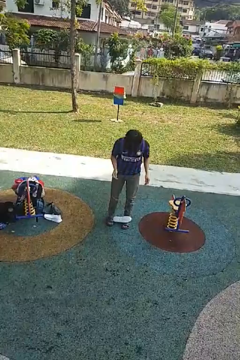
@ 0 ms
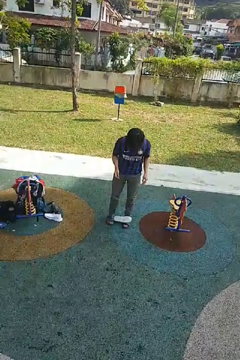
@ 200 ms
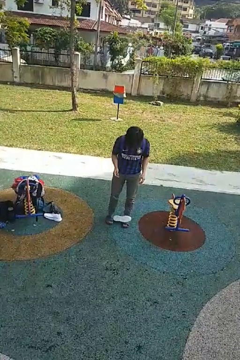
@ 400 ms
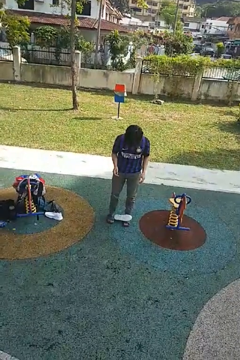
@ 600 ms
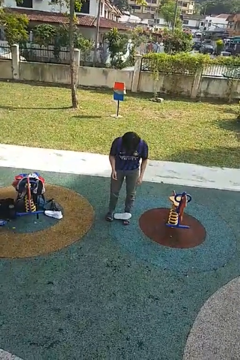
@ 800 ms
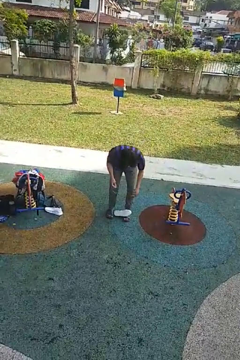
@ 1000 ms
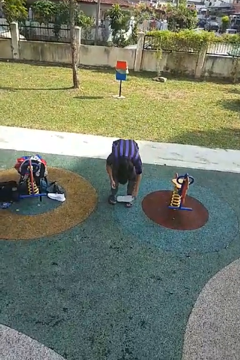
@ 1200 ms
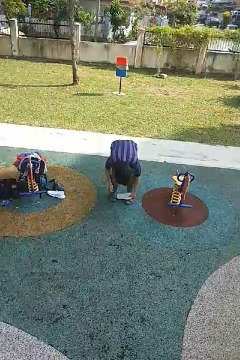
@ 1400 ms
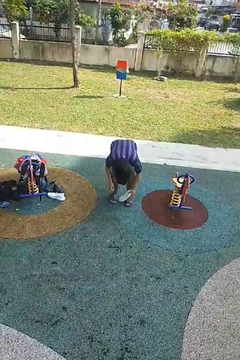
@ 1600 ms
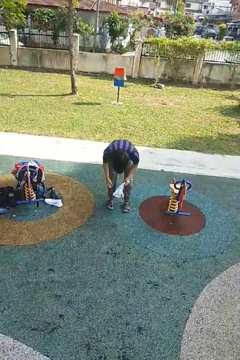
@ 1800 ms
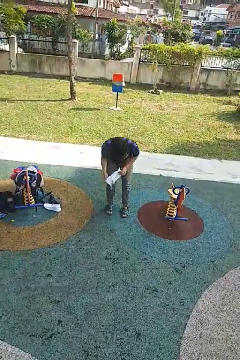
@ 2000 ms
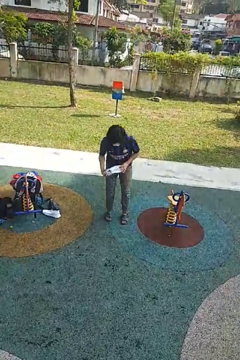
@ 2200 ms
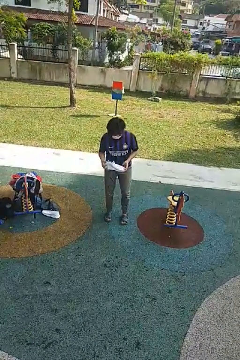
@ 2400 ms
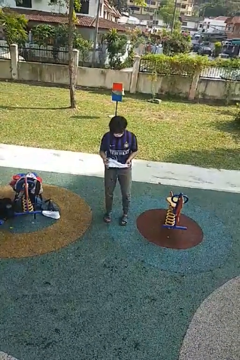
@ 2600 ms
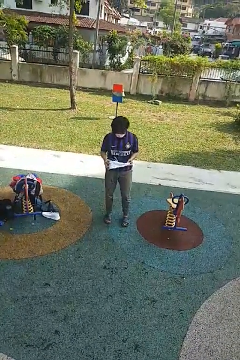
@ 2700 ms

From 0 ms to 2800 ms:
person picks up object from floor

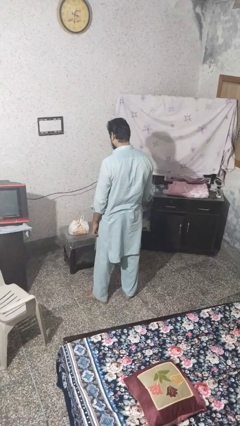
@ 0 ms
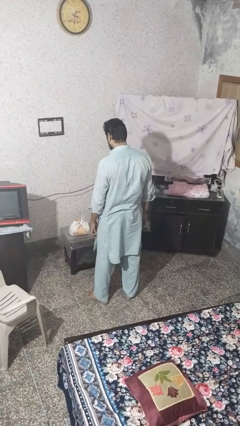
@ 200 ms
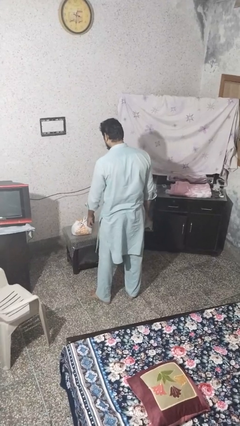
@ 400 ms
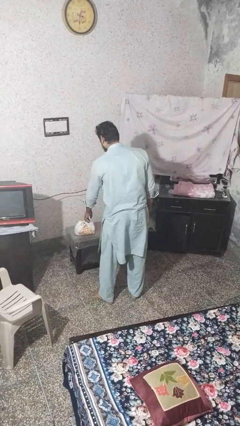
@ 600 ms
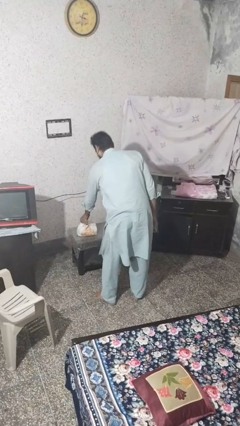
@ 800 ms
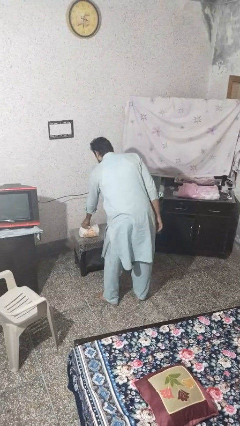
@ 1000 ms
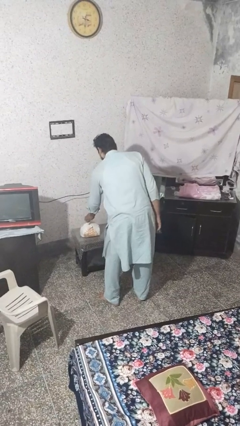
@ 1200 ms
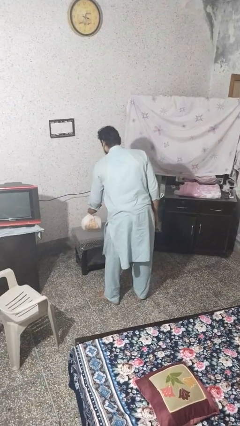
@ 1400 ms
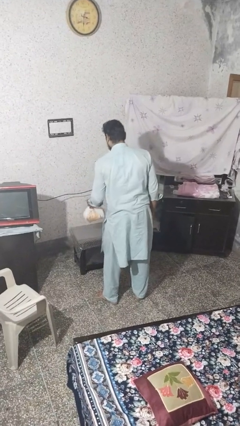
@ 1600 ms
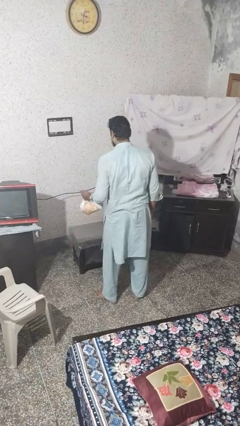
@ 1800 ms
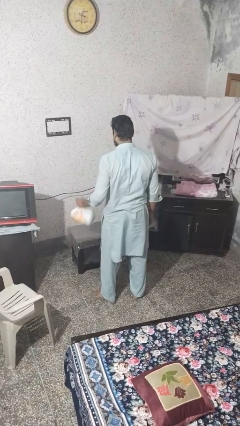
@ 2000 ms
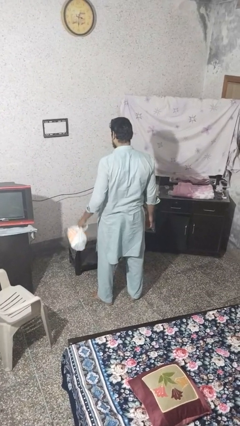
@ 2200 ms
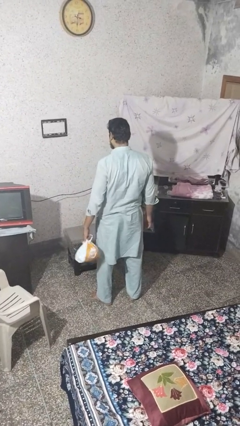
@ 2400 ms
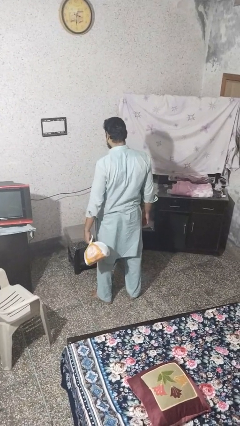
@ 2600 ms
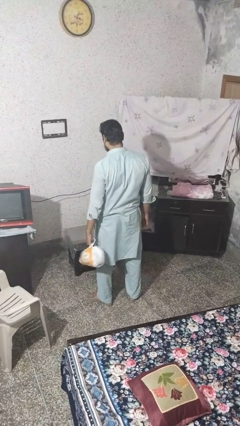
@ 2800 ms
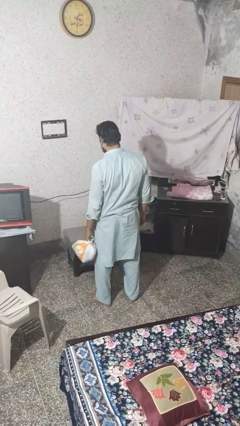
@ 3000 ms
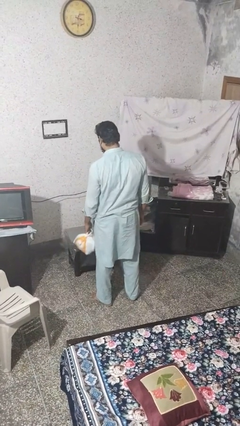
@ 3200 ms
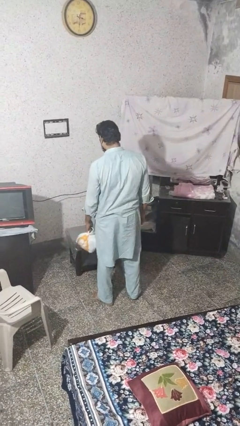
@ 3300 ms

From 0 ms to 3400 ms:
person picks up object from table

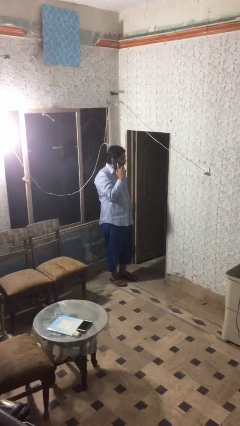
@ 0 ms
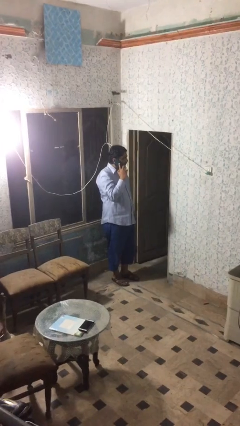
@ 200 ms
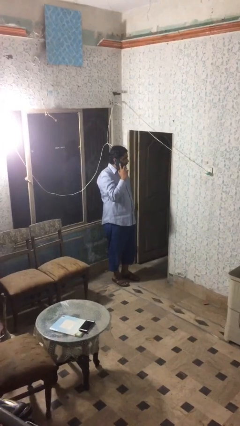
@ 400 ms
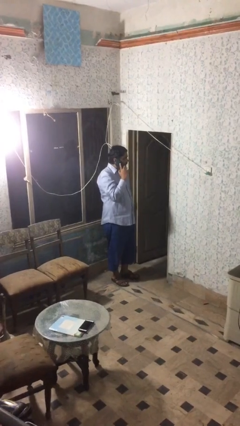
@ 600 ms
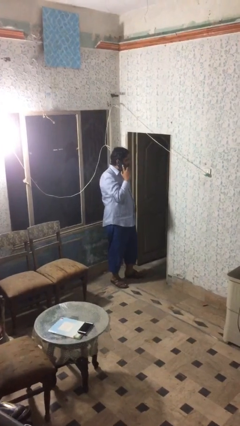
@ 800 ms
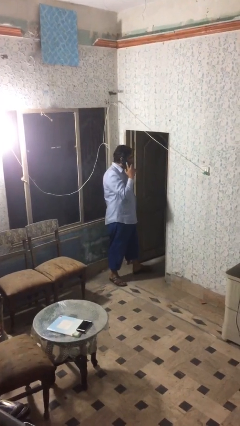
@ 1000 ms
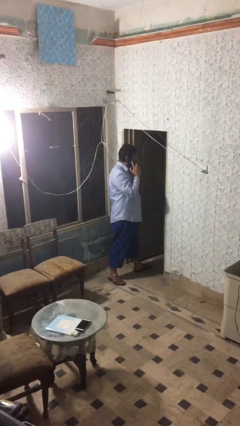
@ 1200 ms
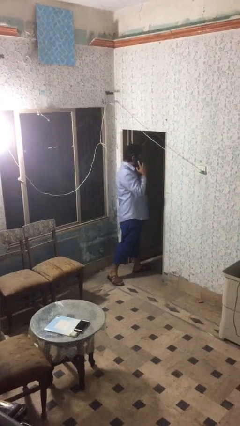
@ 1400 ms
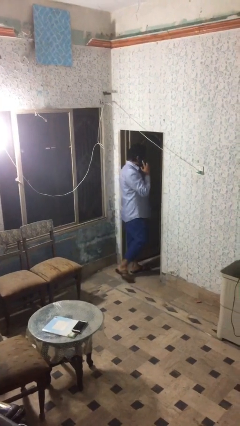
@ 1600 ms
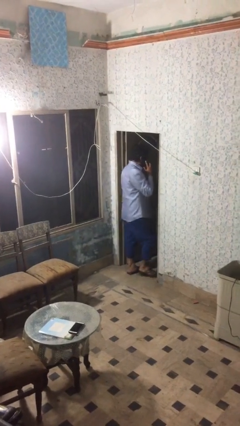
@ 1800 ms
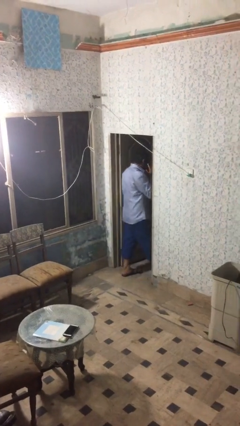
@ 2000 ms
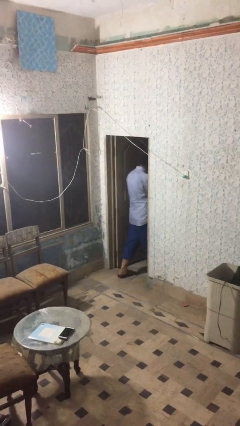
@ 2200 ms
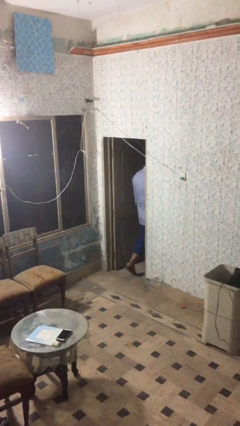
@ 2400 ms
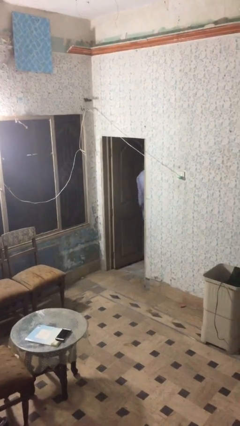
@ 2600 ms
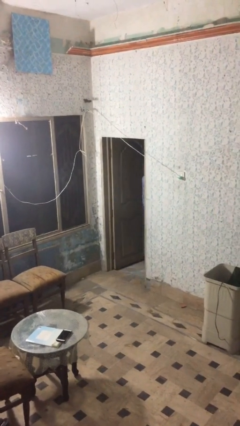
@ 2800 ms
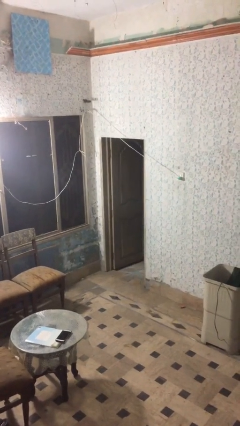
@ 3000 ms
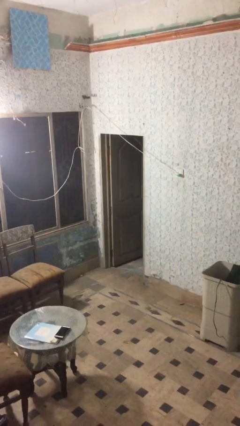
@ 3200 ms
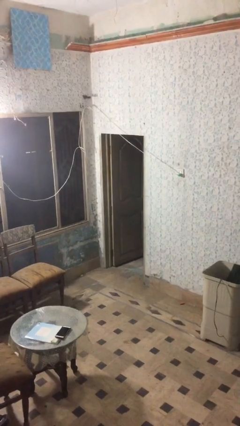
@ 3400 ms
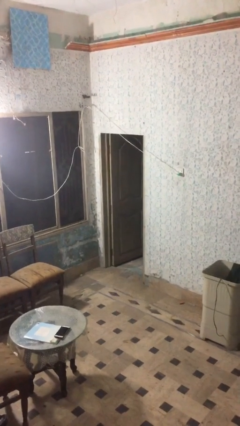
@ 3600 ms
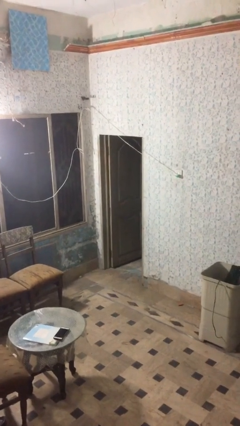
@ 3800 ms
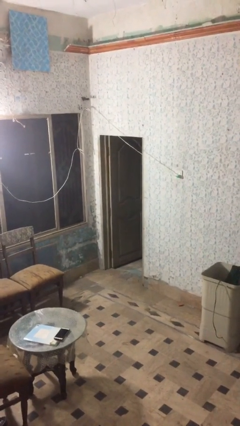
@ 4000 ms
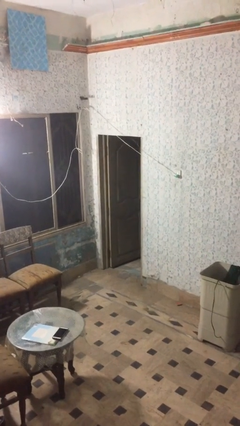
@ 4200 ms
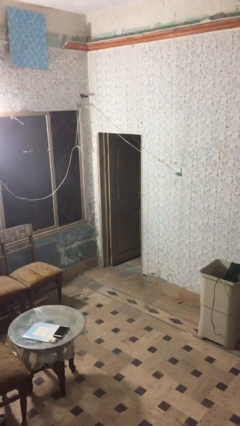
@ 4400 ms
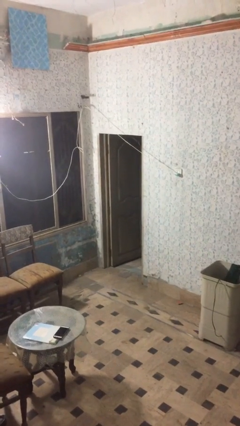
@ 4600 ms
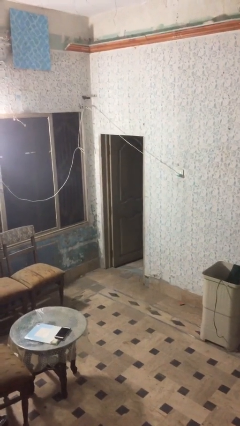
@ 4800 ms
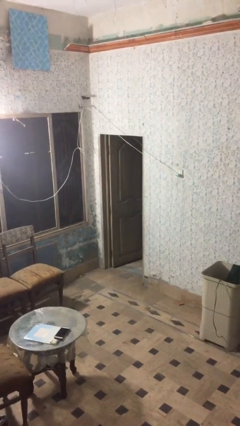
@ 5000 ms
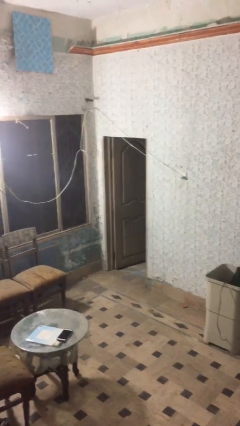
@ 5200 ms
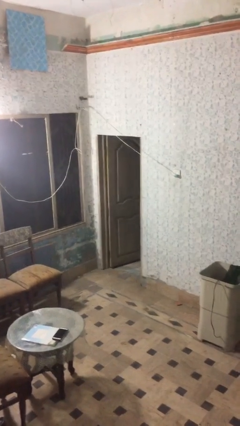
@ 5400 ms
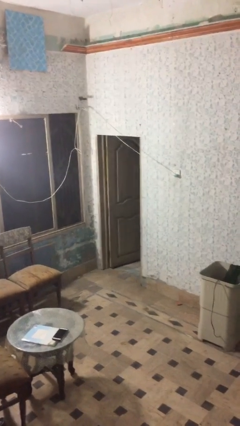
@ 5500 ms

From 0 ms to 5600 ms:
person exits scene through structure

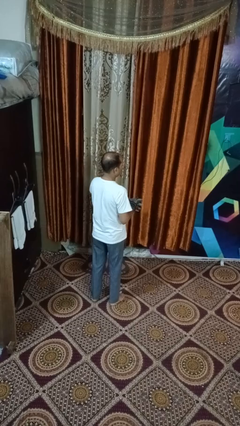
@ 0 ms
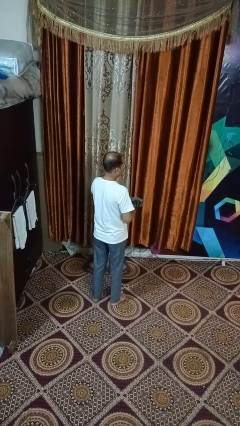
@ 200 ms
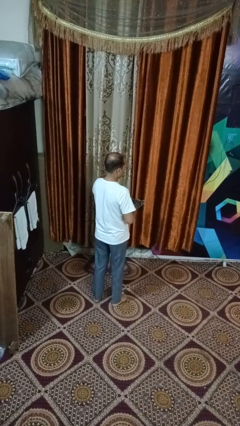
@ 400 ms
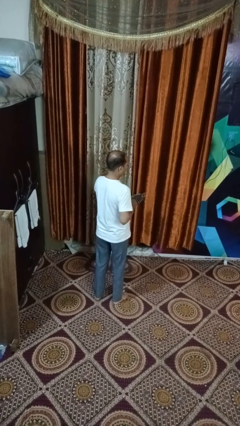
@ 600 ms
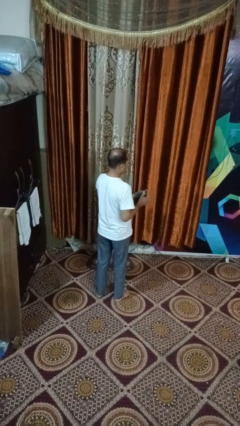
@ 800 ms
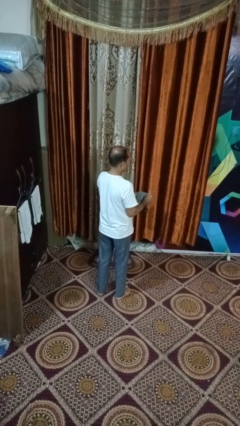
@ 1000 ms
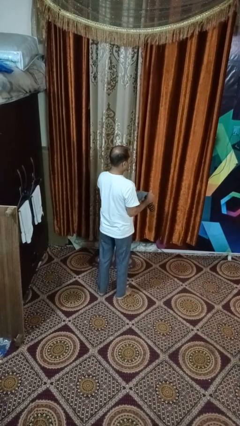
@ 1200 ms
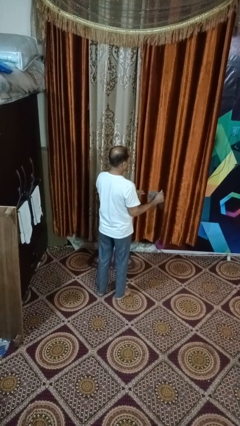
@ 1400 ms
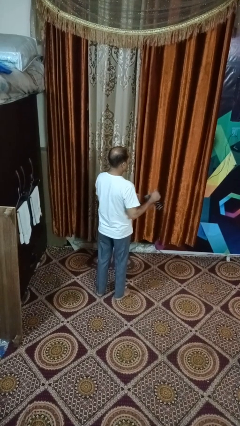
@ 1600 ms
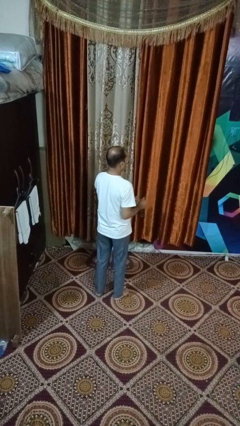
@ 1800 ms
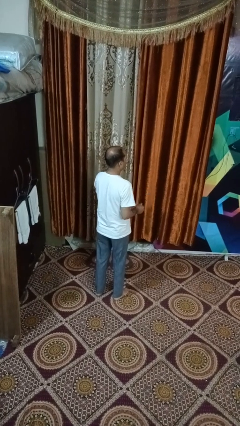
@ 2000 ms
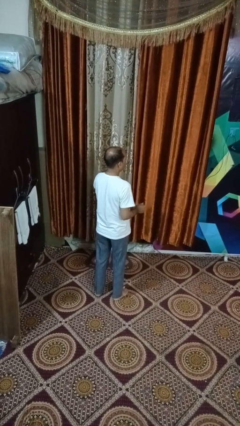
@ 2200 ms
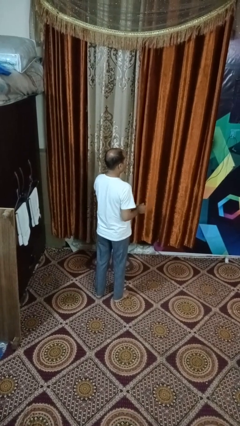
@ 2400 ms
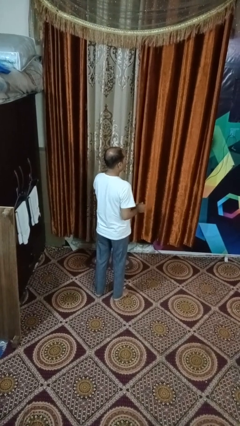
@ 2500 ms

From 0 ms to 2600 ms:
person takes off gloves

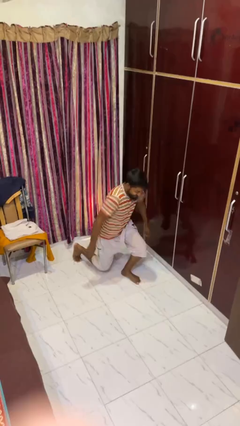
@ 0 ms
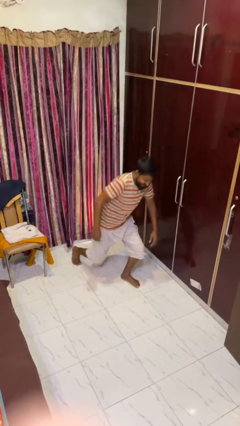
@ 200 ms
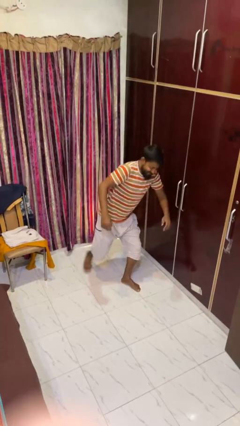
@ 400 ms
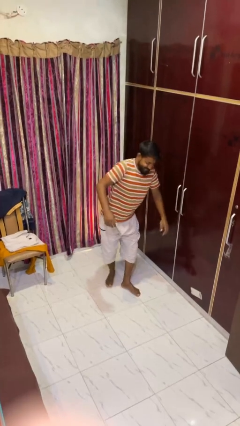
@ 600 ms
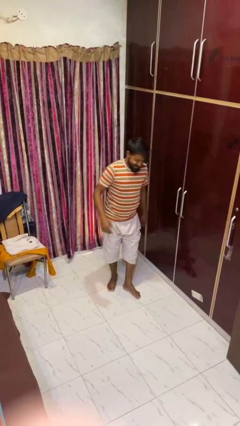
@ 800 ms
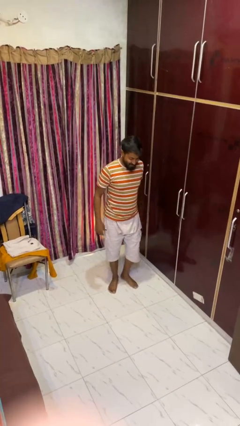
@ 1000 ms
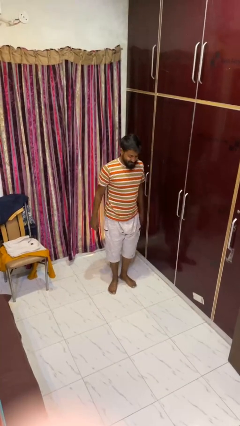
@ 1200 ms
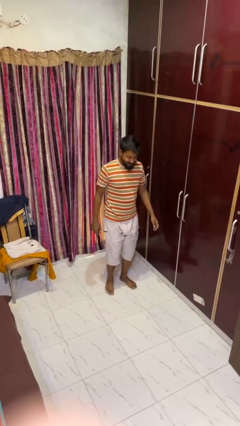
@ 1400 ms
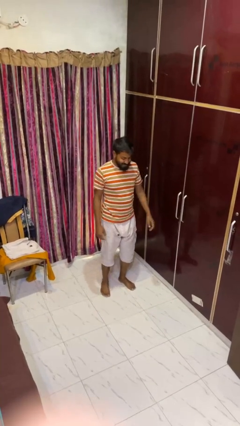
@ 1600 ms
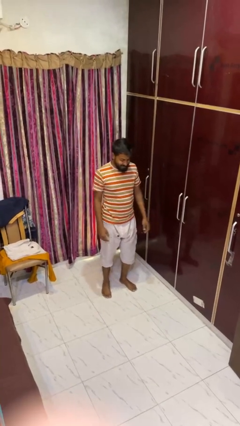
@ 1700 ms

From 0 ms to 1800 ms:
person stands up from floor

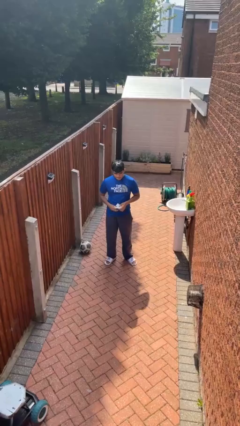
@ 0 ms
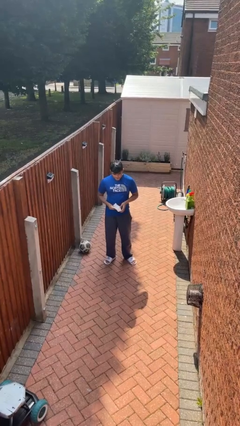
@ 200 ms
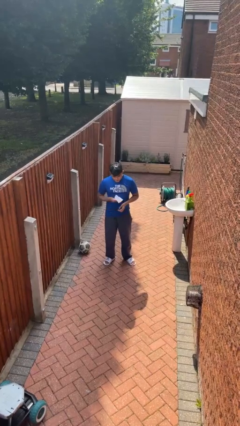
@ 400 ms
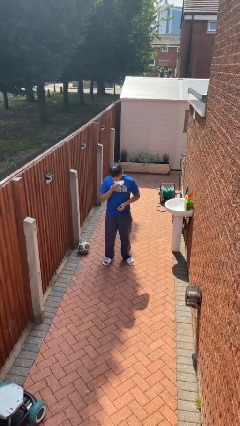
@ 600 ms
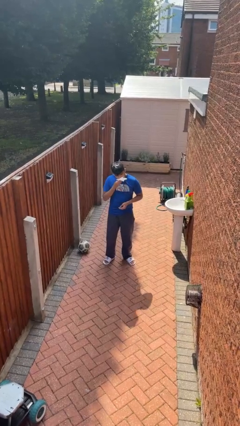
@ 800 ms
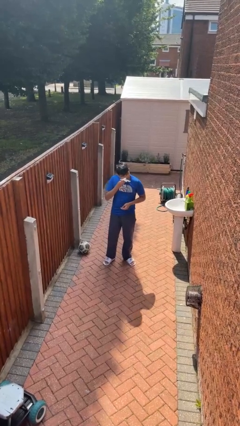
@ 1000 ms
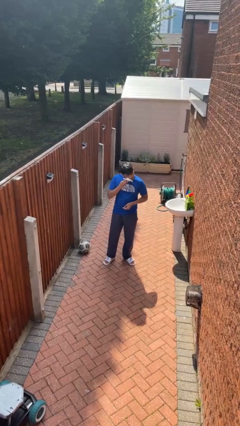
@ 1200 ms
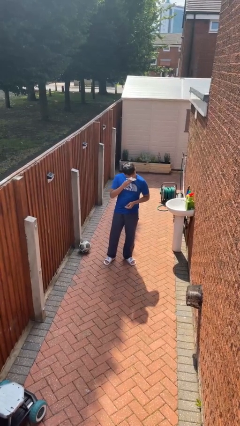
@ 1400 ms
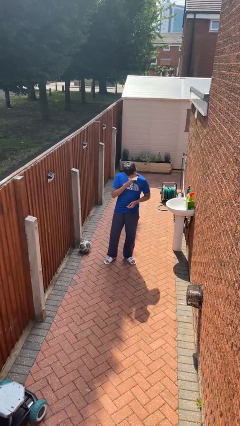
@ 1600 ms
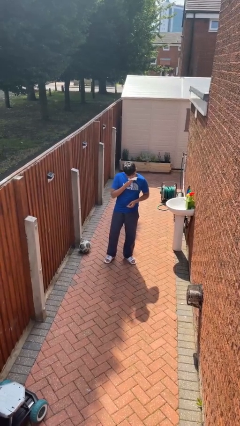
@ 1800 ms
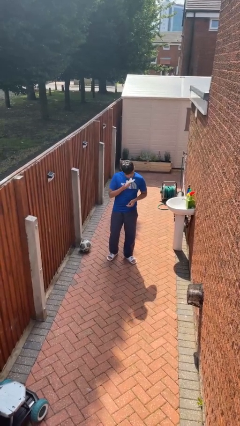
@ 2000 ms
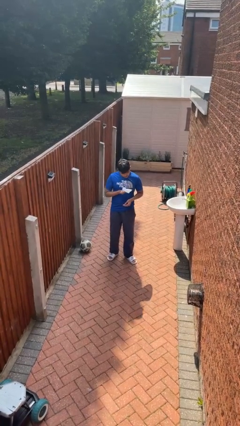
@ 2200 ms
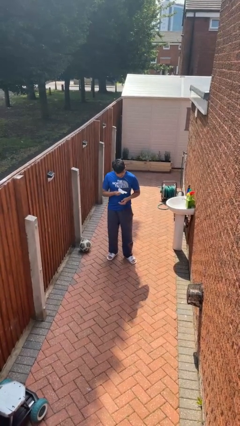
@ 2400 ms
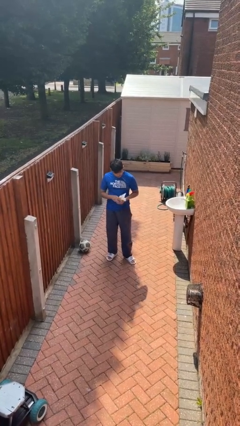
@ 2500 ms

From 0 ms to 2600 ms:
person wipes mouth with napkin
